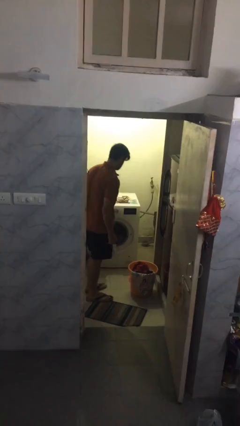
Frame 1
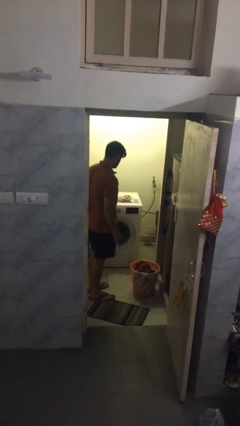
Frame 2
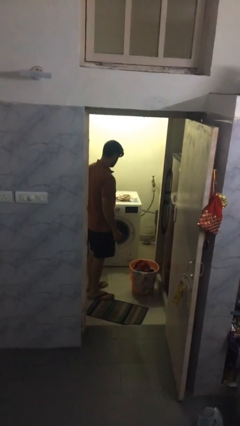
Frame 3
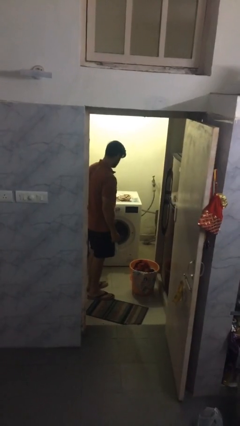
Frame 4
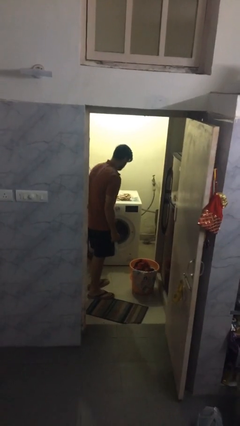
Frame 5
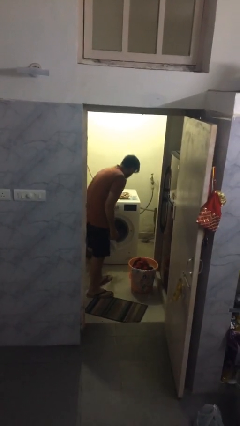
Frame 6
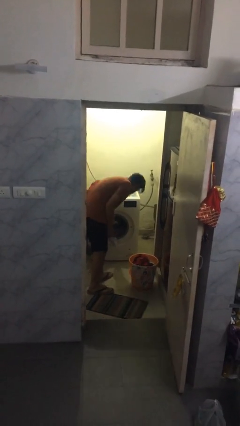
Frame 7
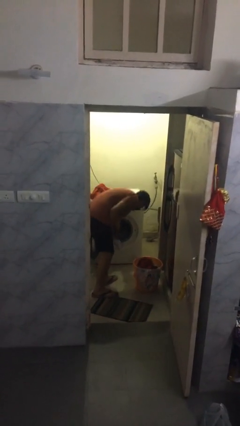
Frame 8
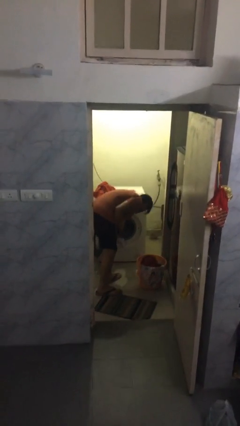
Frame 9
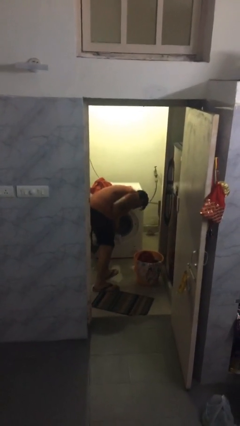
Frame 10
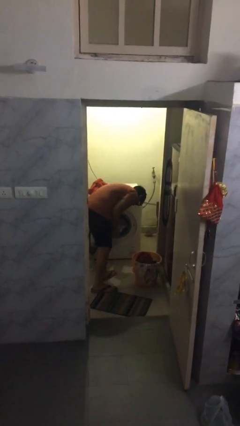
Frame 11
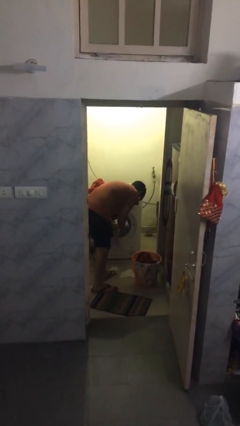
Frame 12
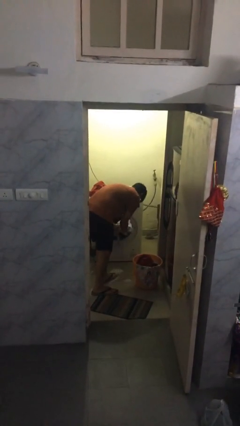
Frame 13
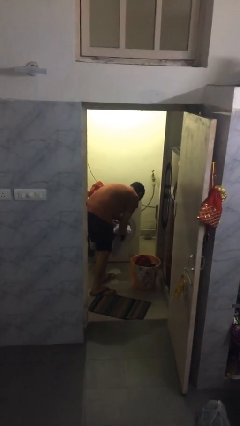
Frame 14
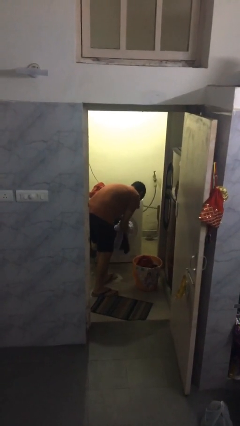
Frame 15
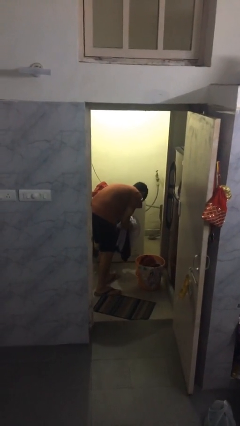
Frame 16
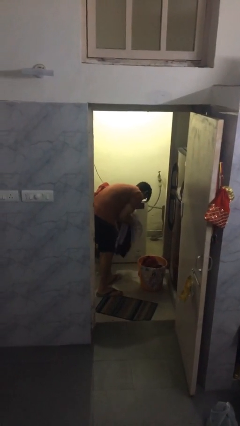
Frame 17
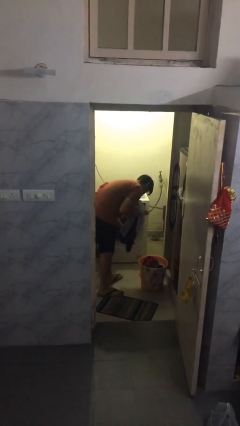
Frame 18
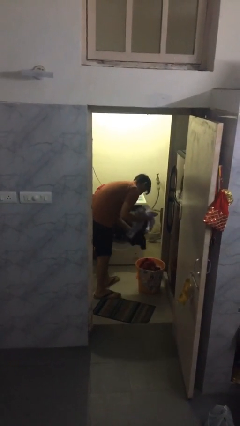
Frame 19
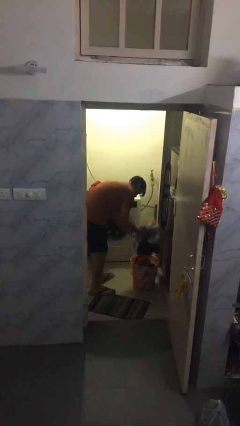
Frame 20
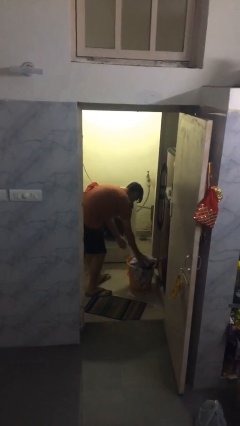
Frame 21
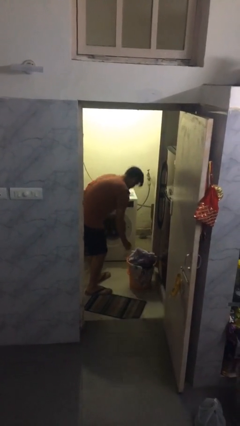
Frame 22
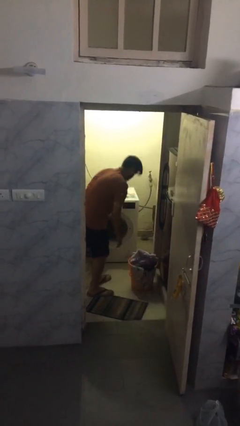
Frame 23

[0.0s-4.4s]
person unloads dryer

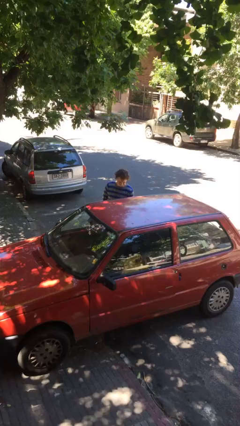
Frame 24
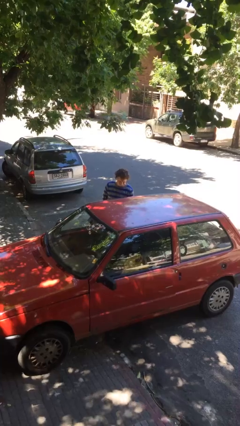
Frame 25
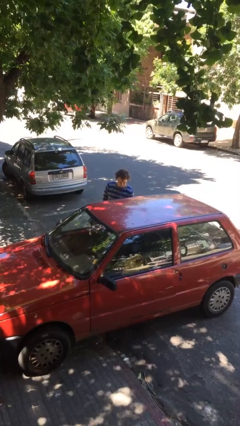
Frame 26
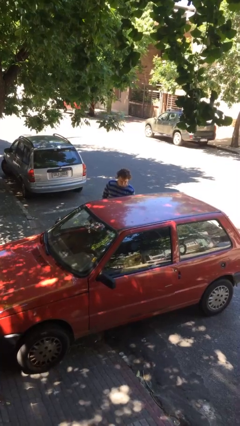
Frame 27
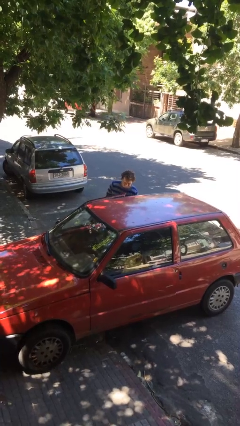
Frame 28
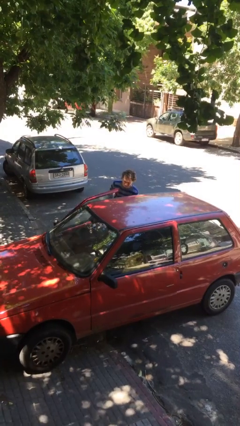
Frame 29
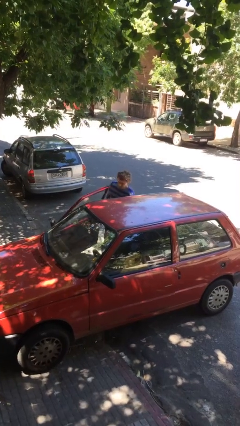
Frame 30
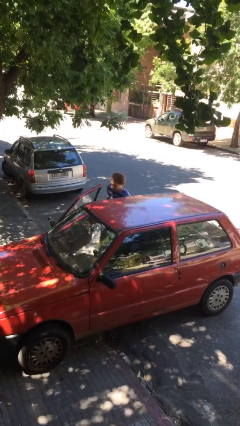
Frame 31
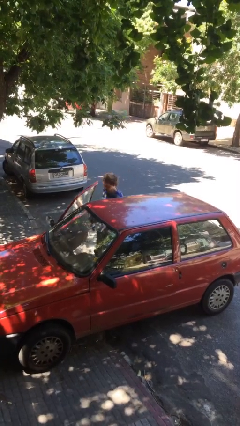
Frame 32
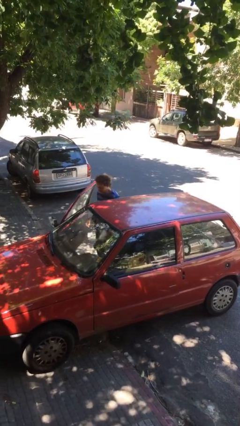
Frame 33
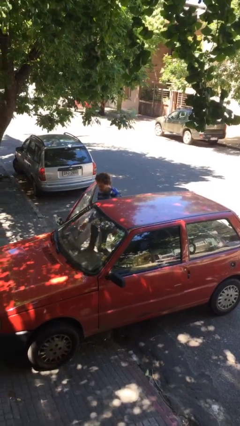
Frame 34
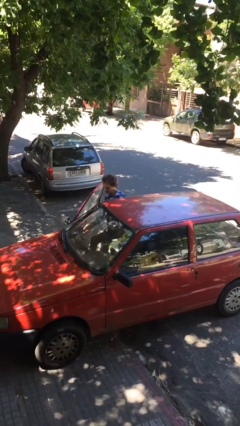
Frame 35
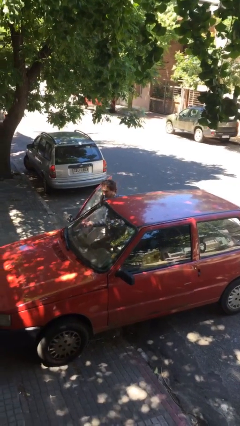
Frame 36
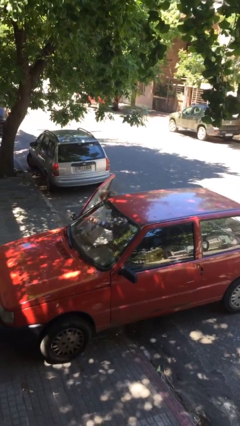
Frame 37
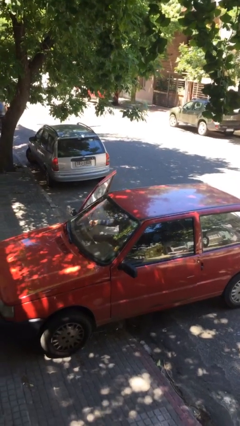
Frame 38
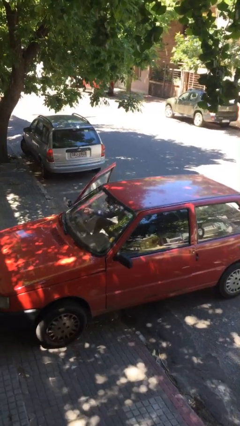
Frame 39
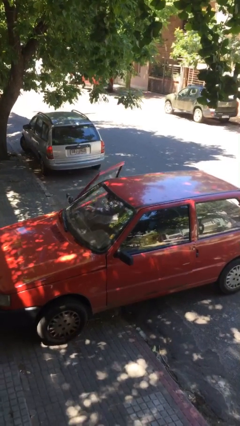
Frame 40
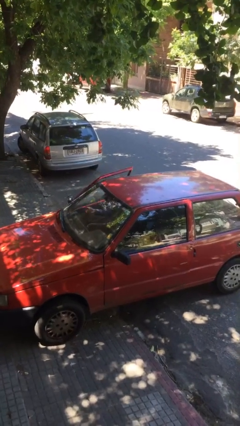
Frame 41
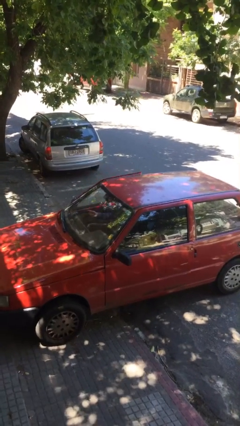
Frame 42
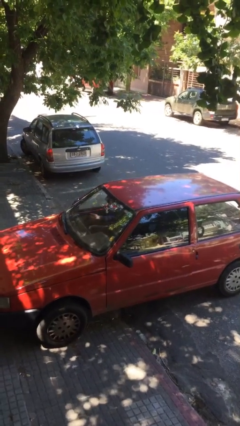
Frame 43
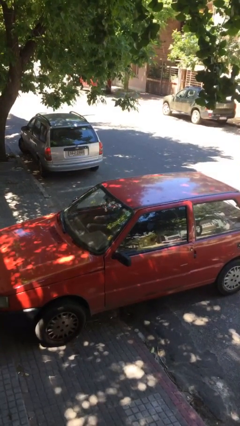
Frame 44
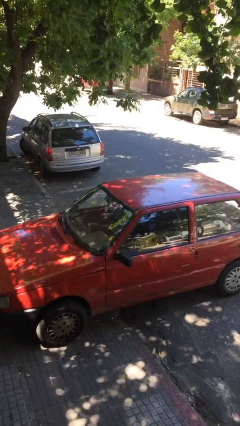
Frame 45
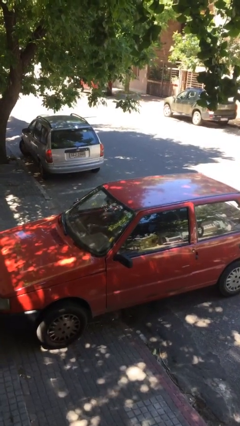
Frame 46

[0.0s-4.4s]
car picks up person

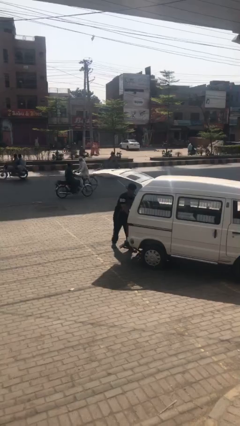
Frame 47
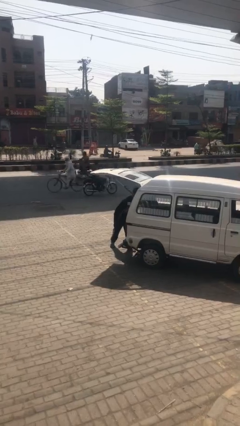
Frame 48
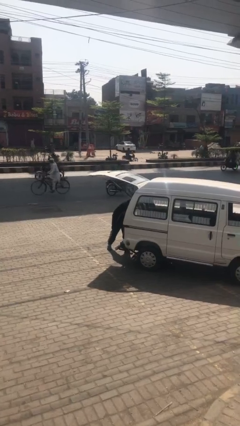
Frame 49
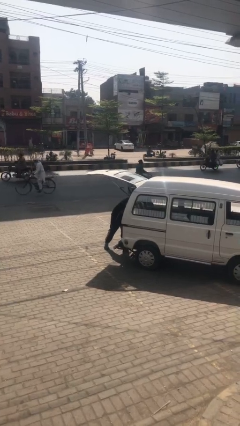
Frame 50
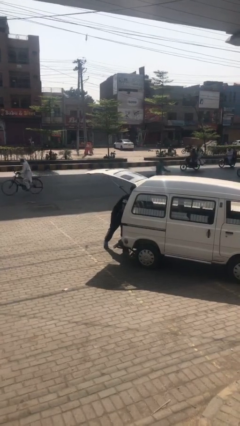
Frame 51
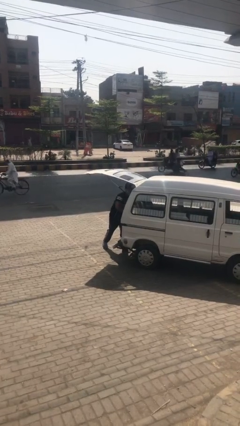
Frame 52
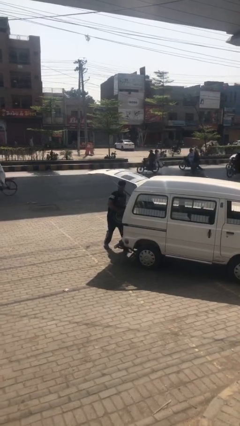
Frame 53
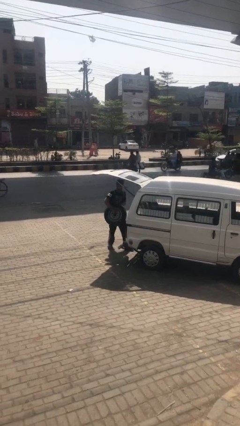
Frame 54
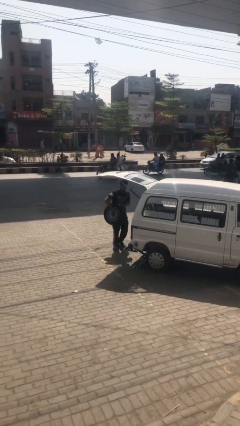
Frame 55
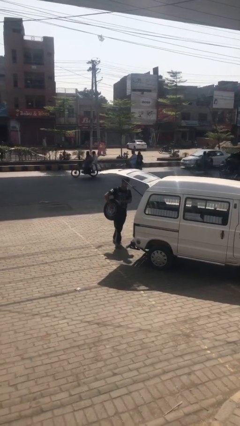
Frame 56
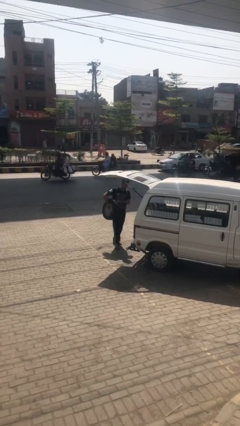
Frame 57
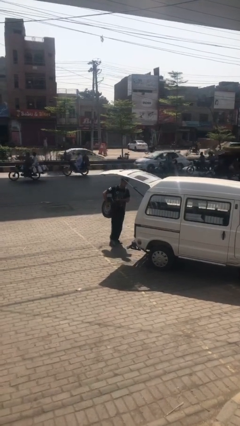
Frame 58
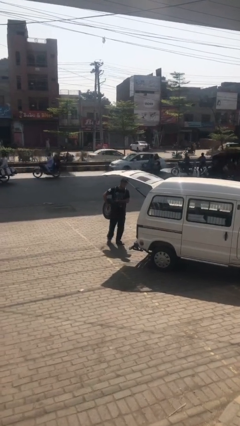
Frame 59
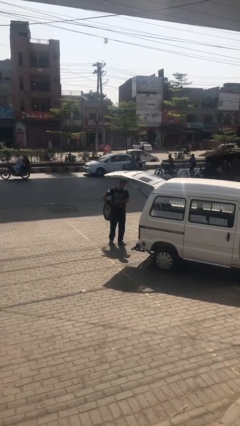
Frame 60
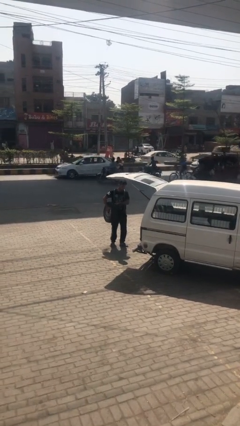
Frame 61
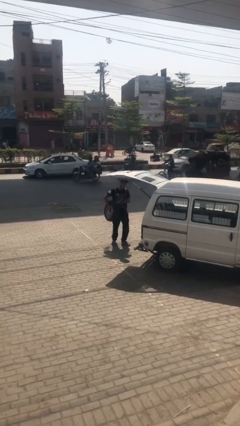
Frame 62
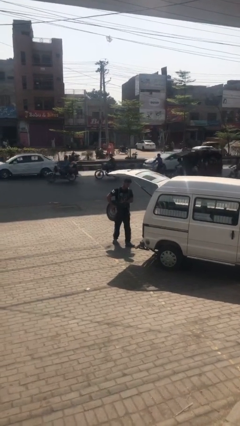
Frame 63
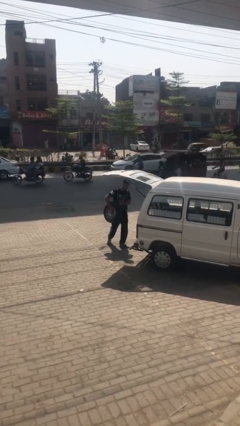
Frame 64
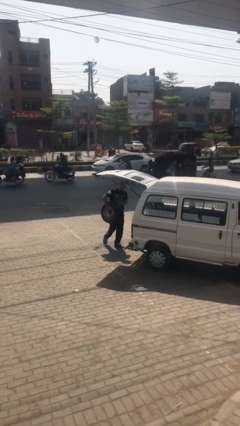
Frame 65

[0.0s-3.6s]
person unloads car

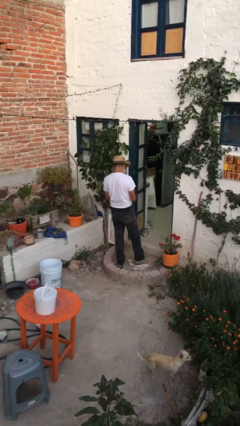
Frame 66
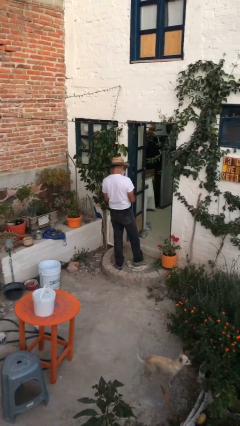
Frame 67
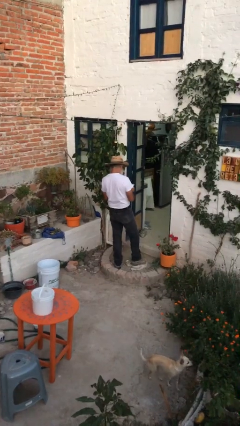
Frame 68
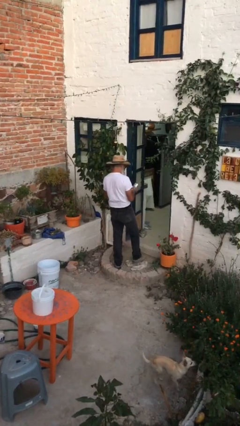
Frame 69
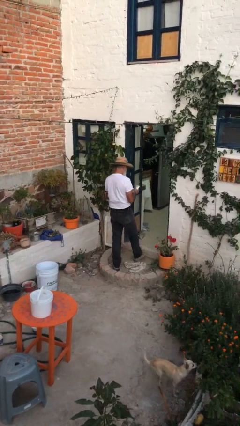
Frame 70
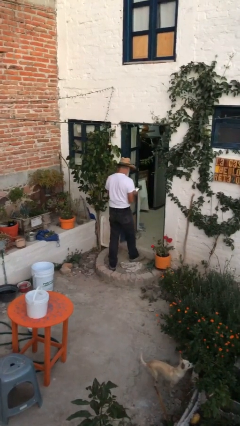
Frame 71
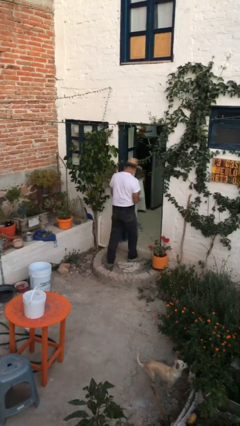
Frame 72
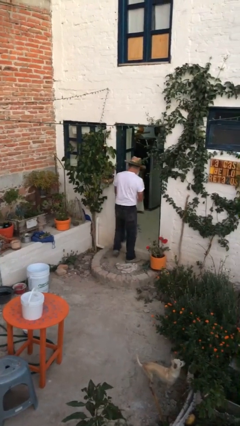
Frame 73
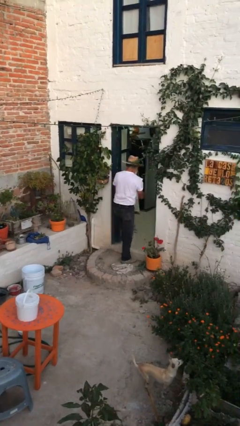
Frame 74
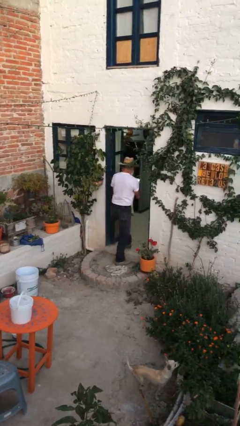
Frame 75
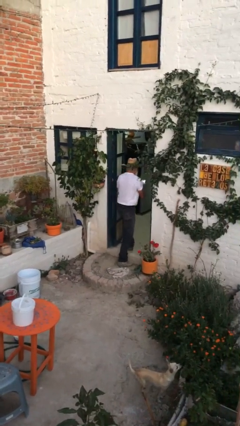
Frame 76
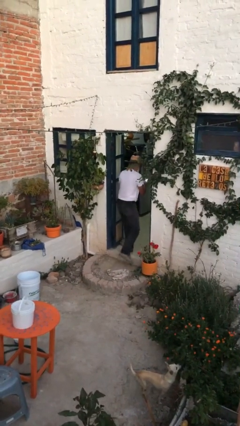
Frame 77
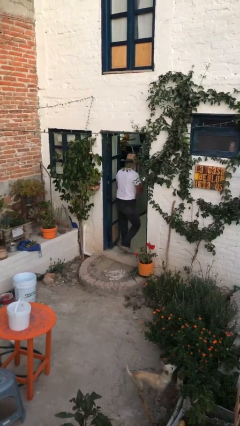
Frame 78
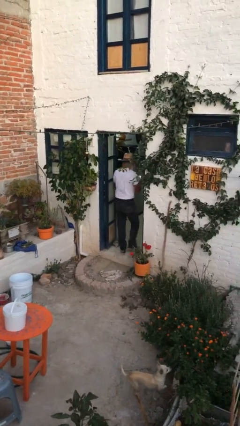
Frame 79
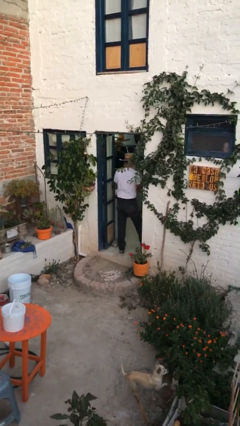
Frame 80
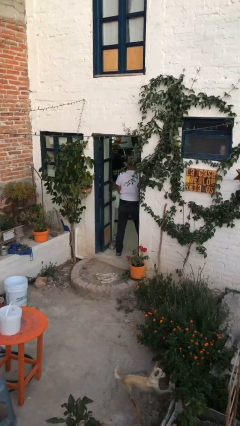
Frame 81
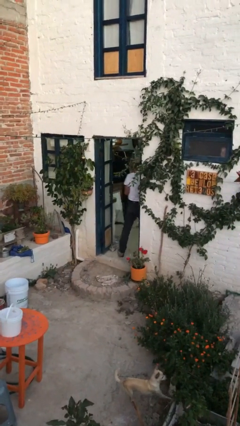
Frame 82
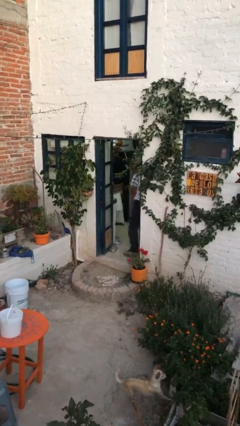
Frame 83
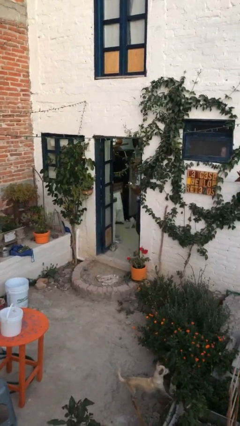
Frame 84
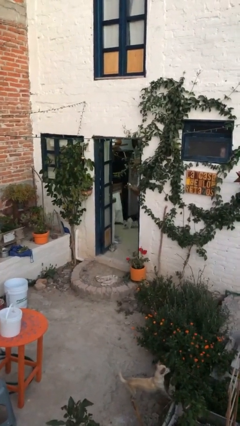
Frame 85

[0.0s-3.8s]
person exits scene through structure

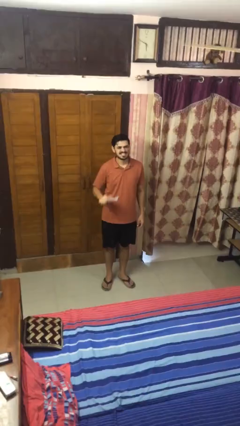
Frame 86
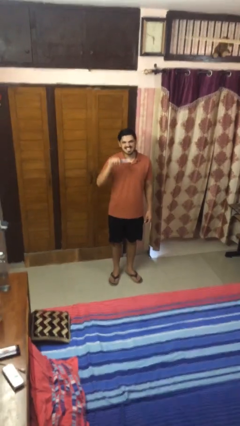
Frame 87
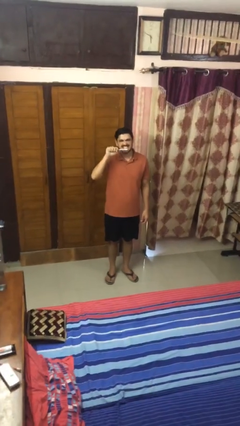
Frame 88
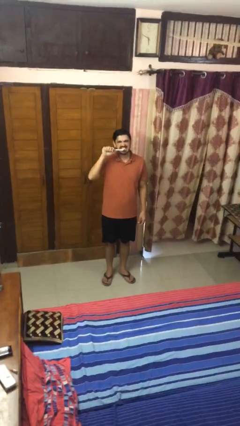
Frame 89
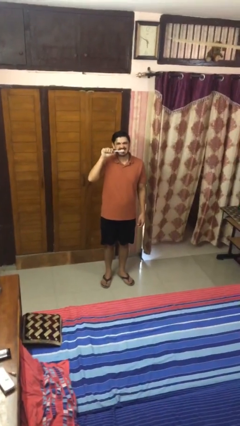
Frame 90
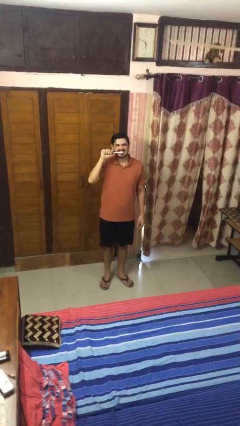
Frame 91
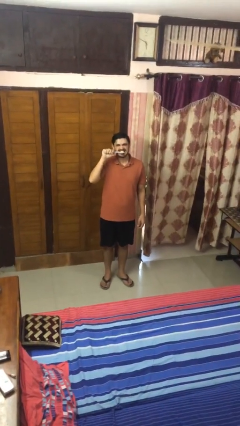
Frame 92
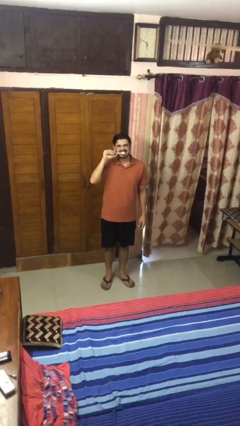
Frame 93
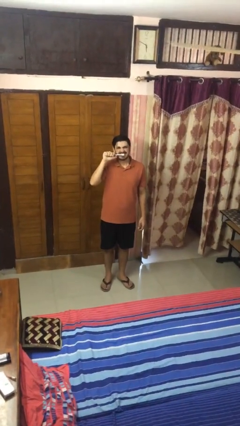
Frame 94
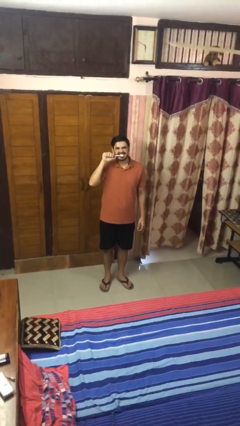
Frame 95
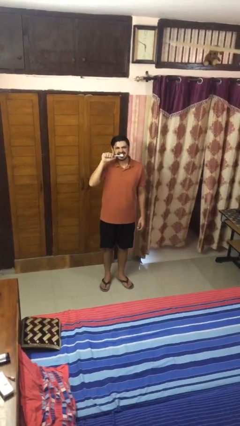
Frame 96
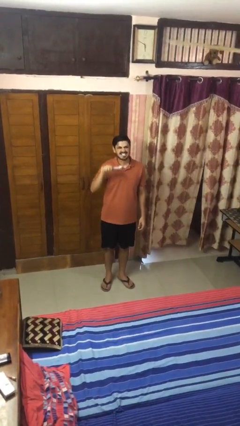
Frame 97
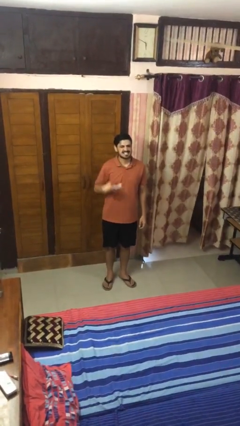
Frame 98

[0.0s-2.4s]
person brushes teeth
